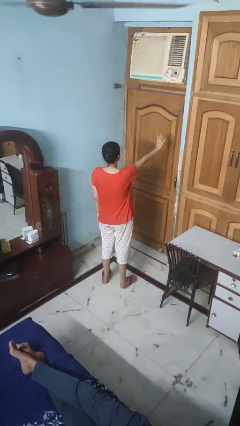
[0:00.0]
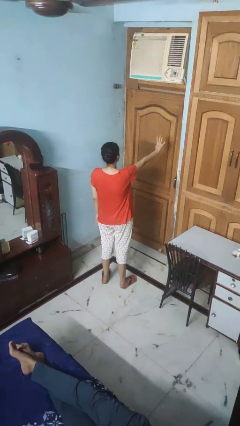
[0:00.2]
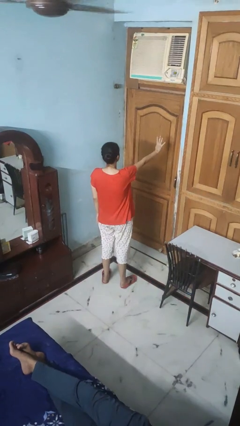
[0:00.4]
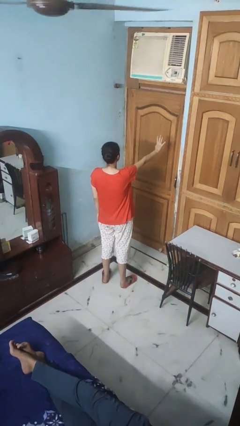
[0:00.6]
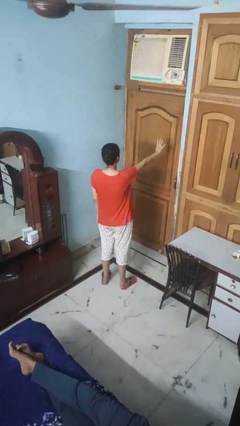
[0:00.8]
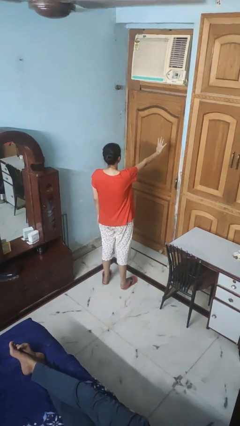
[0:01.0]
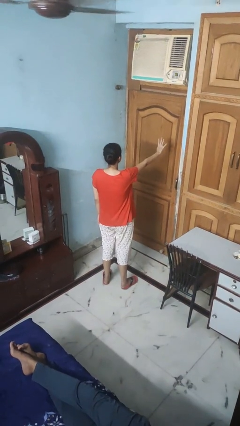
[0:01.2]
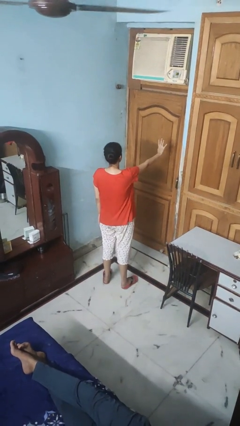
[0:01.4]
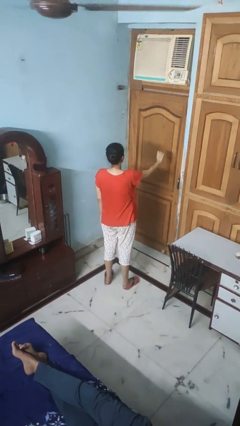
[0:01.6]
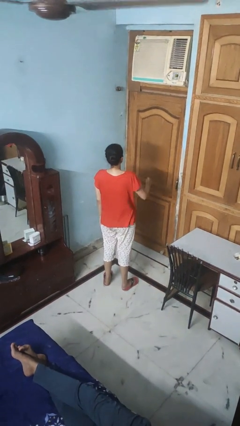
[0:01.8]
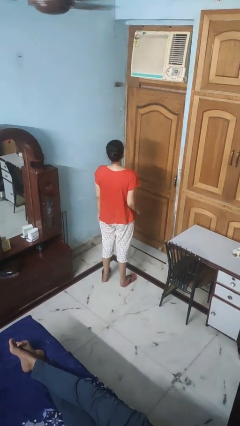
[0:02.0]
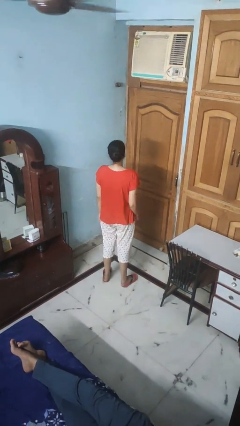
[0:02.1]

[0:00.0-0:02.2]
person gestures number four

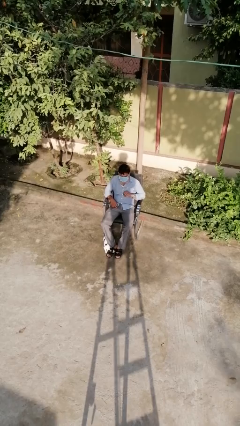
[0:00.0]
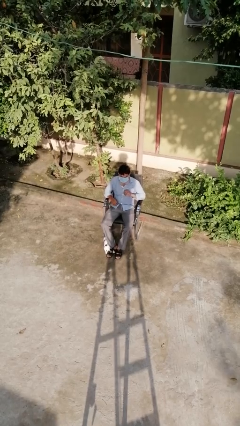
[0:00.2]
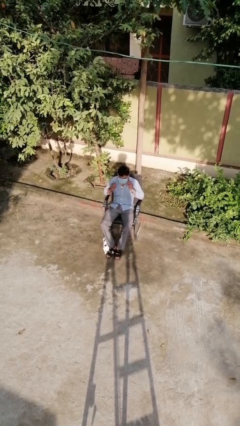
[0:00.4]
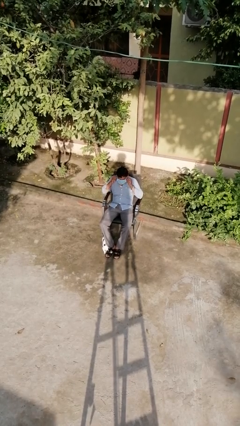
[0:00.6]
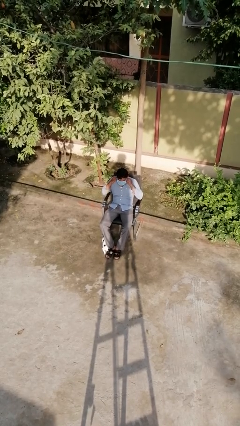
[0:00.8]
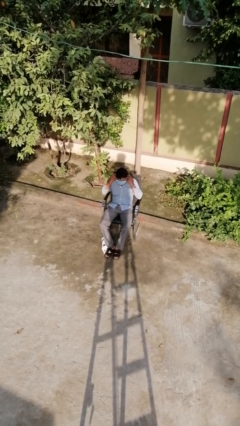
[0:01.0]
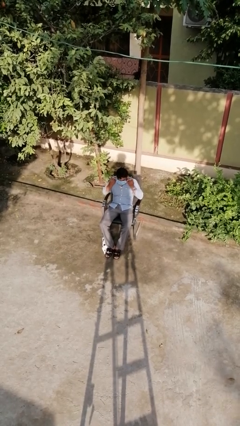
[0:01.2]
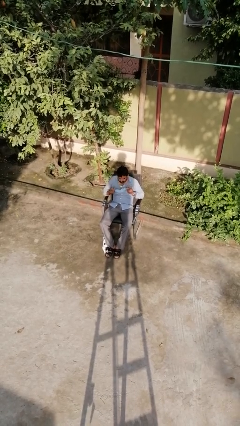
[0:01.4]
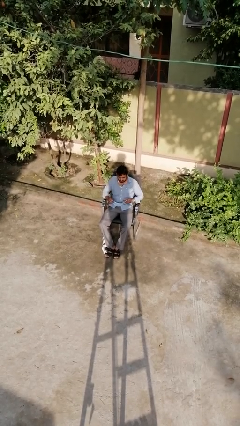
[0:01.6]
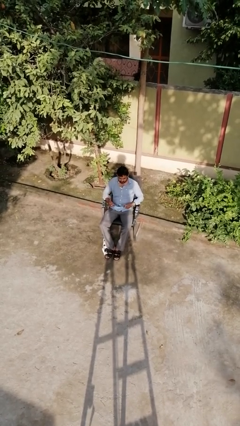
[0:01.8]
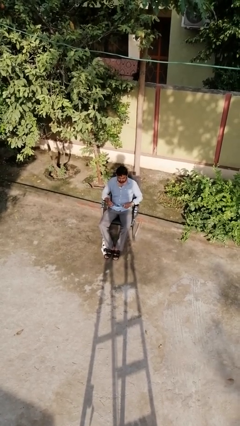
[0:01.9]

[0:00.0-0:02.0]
person takes off facemask

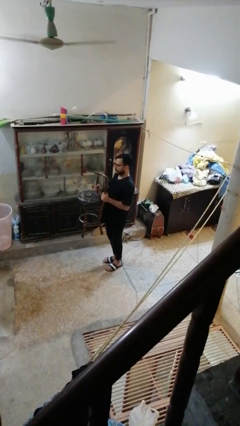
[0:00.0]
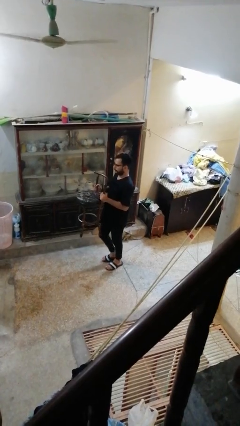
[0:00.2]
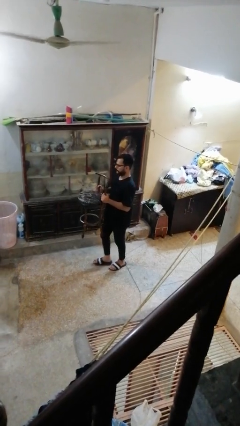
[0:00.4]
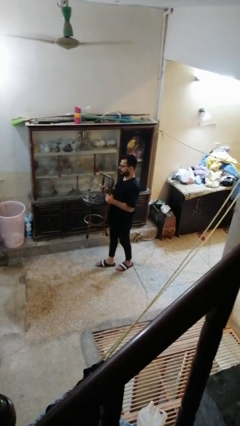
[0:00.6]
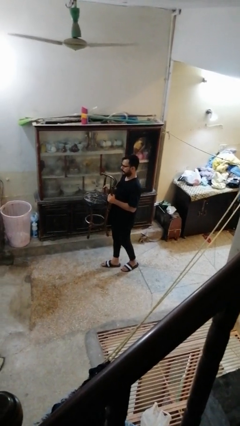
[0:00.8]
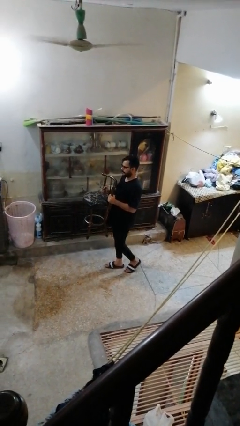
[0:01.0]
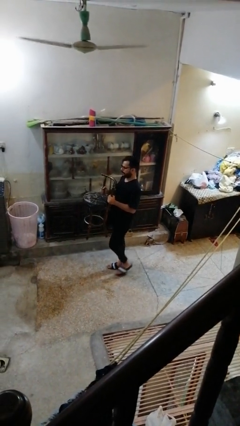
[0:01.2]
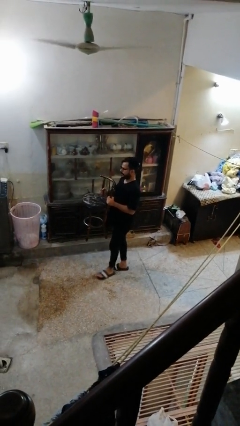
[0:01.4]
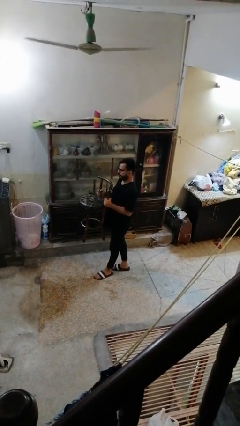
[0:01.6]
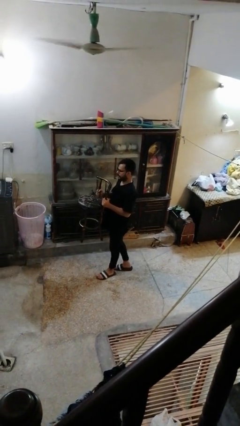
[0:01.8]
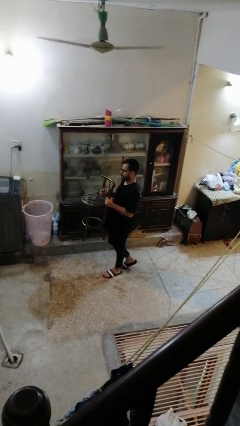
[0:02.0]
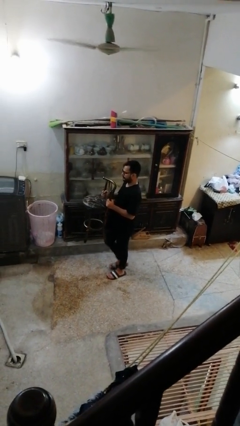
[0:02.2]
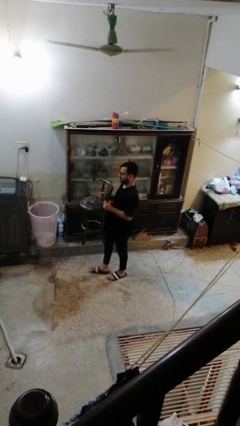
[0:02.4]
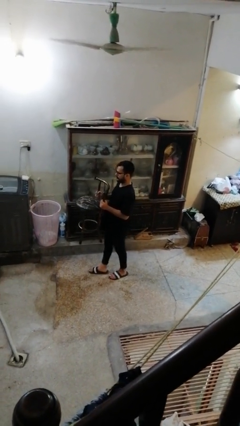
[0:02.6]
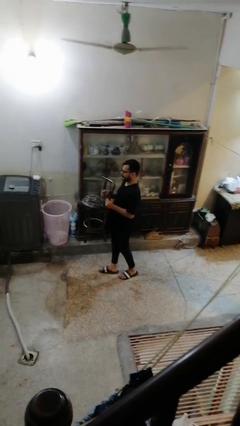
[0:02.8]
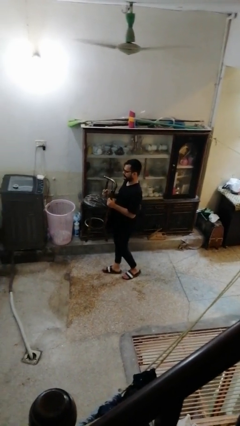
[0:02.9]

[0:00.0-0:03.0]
person carries furniture

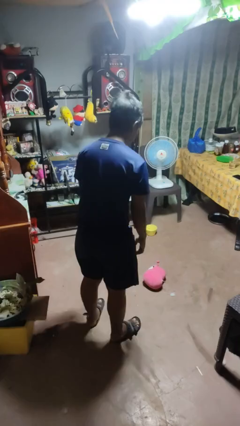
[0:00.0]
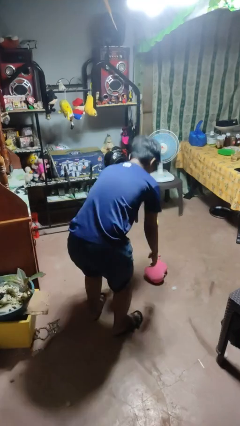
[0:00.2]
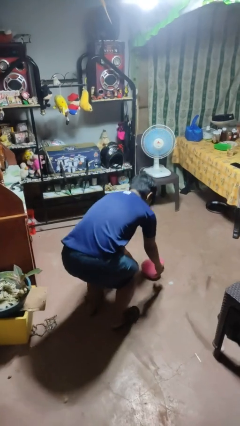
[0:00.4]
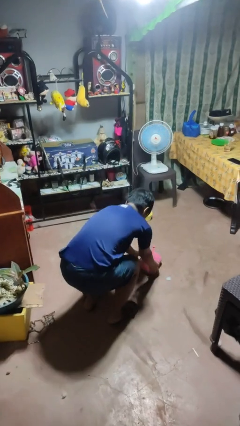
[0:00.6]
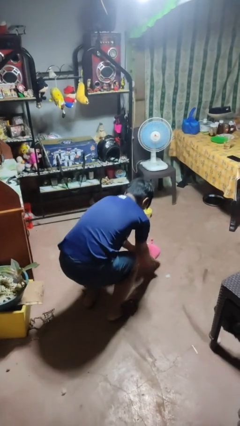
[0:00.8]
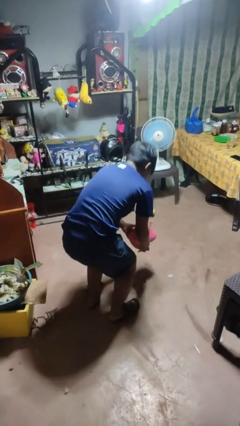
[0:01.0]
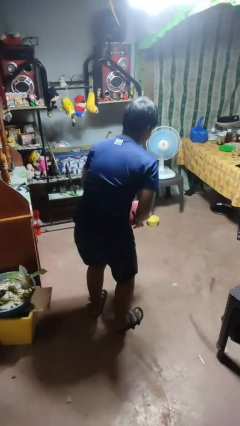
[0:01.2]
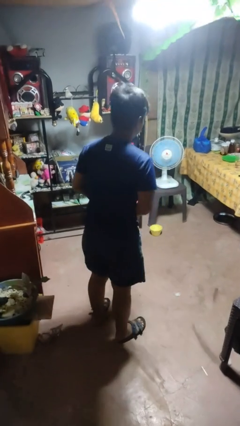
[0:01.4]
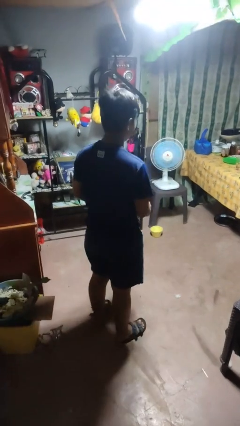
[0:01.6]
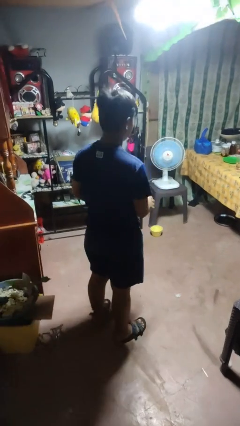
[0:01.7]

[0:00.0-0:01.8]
person picks up object from floor

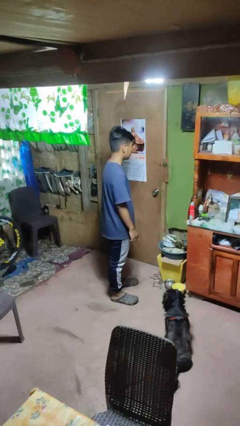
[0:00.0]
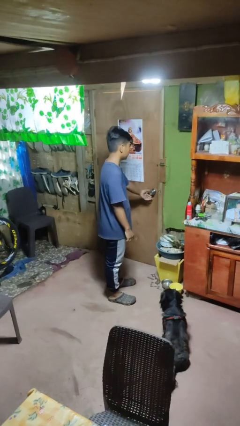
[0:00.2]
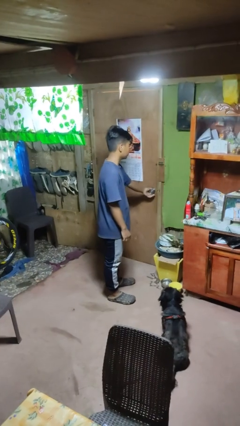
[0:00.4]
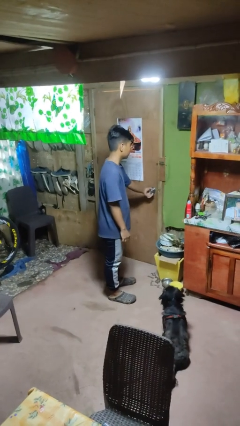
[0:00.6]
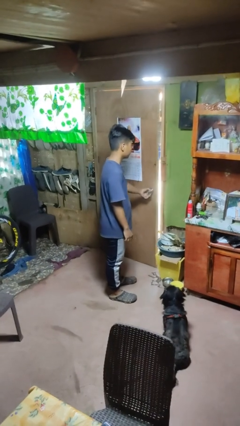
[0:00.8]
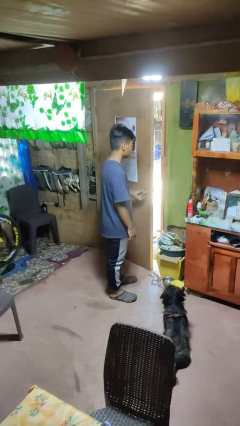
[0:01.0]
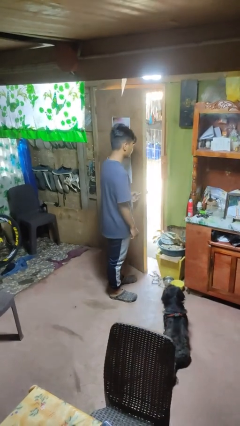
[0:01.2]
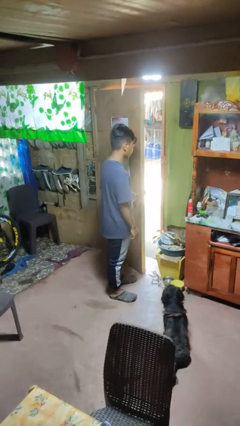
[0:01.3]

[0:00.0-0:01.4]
person opens facility door

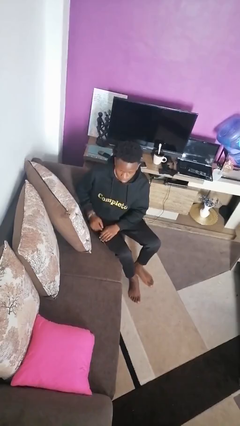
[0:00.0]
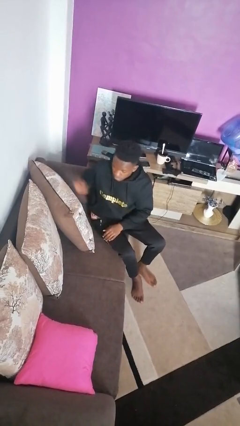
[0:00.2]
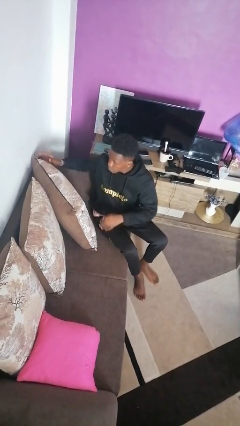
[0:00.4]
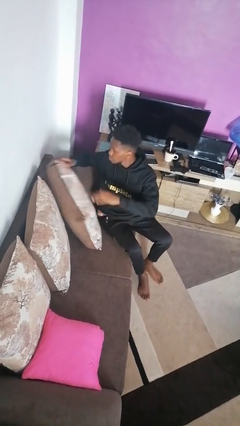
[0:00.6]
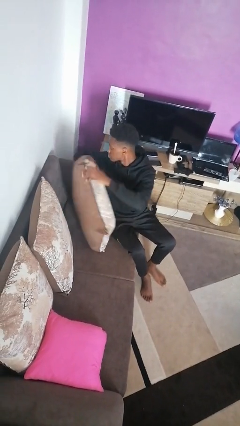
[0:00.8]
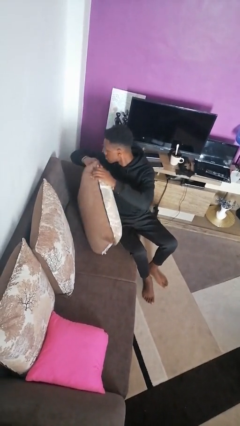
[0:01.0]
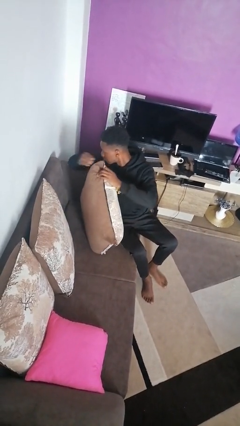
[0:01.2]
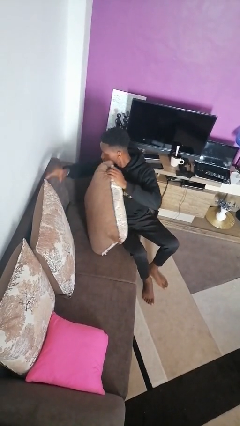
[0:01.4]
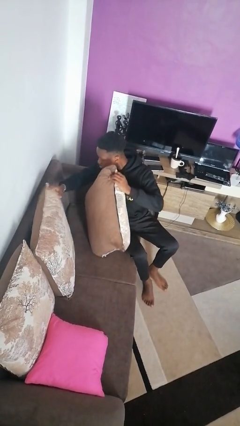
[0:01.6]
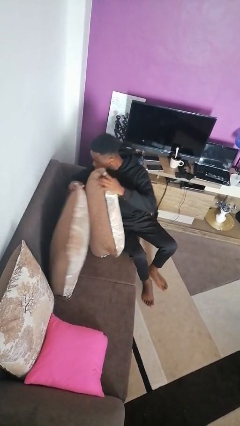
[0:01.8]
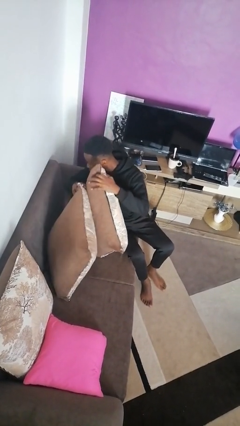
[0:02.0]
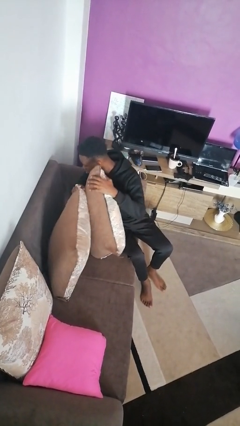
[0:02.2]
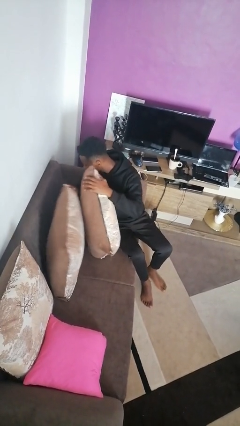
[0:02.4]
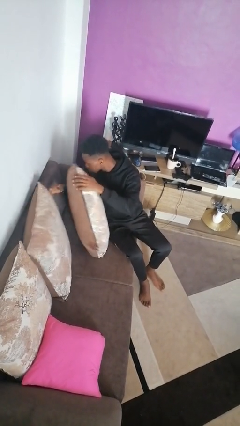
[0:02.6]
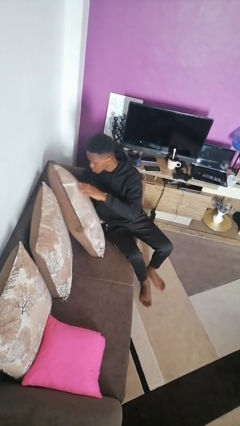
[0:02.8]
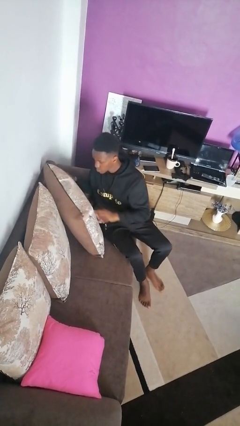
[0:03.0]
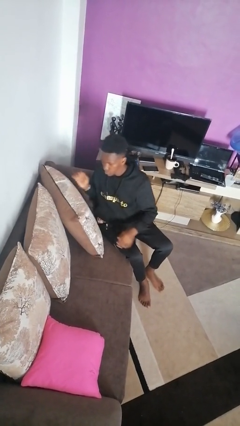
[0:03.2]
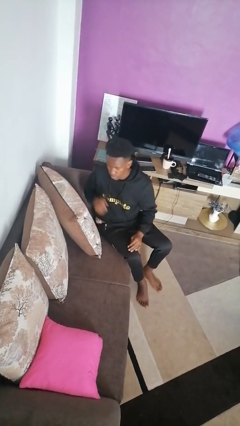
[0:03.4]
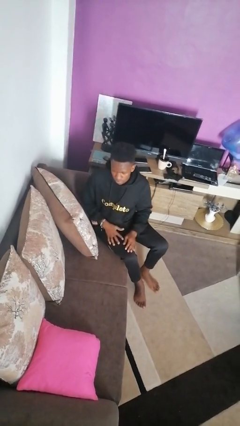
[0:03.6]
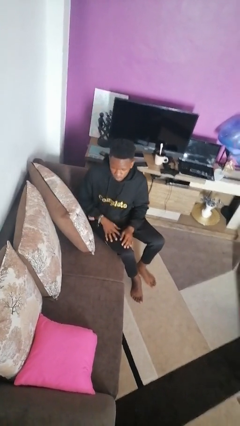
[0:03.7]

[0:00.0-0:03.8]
person searches in couch

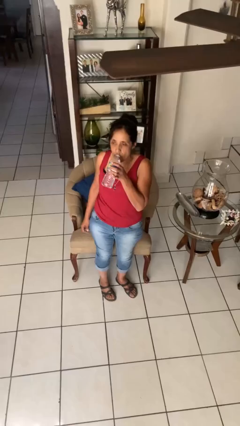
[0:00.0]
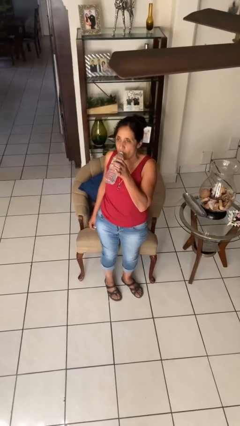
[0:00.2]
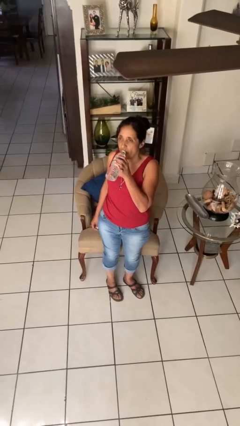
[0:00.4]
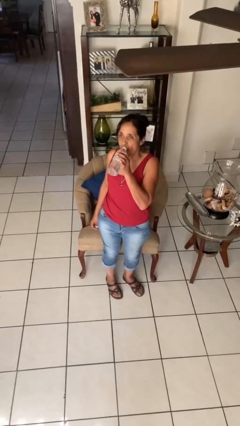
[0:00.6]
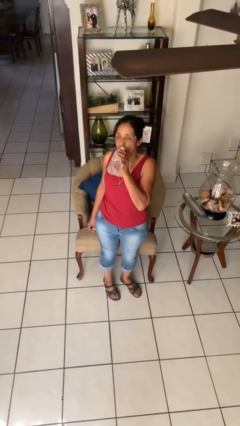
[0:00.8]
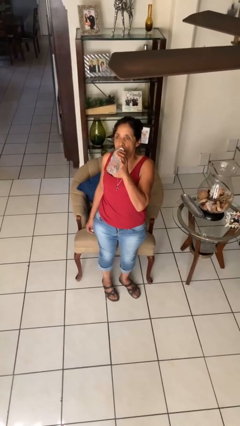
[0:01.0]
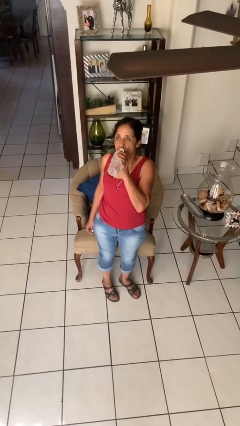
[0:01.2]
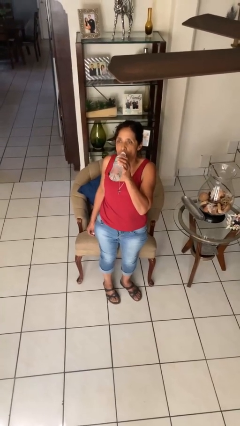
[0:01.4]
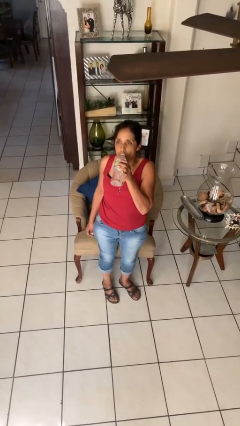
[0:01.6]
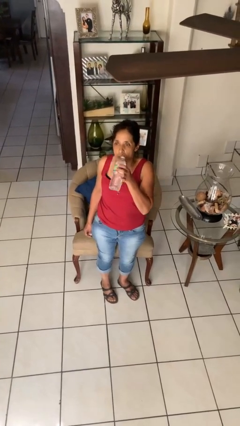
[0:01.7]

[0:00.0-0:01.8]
person drinks from bottle

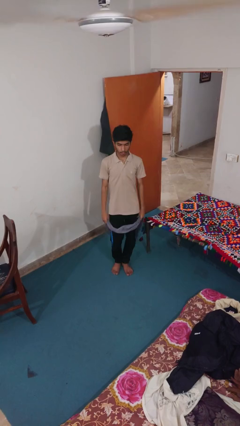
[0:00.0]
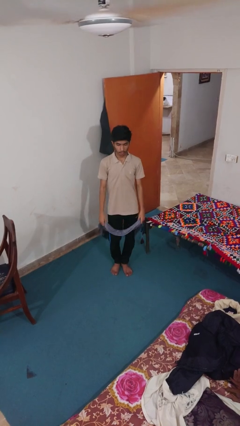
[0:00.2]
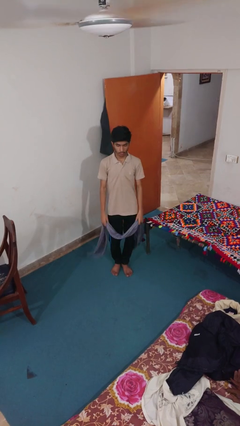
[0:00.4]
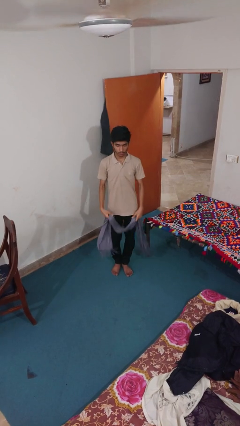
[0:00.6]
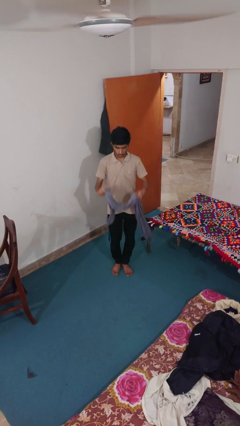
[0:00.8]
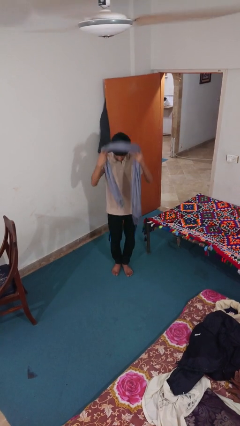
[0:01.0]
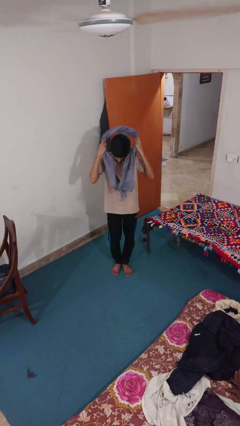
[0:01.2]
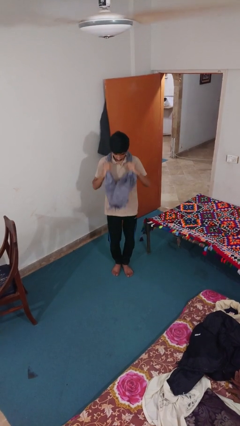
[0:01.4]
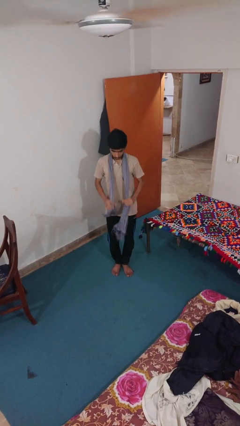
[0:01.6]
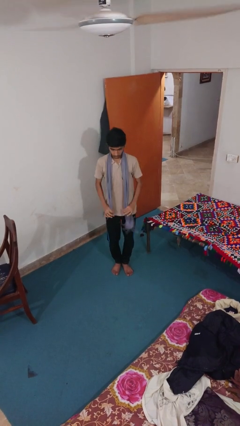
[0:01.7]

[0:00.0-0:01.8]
person puts on scarf
